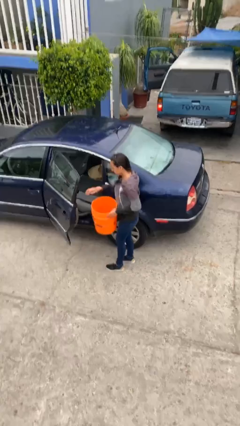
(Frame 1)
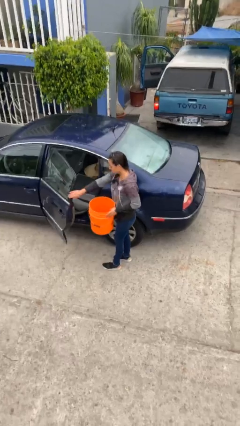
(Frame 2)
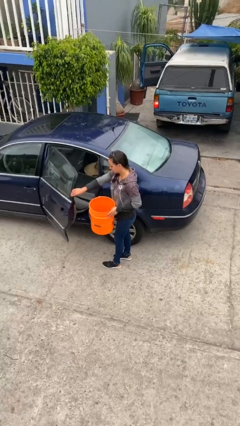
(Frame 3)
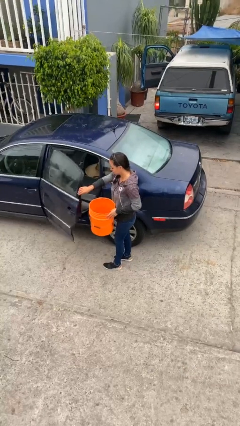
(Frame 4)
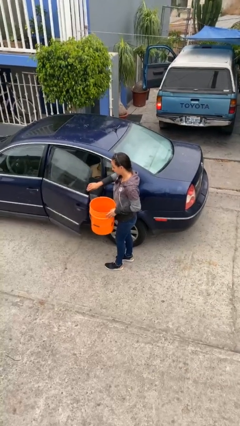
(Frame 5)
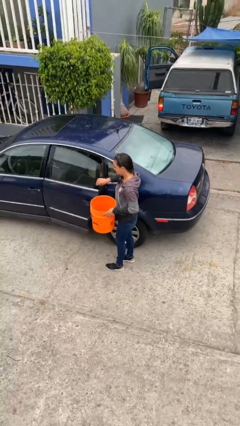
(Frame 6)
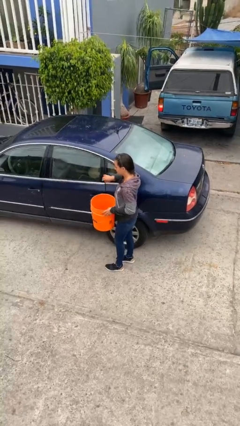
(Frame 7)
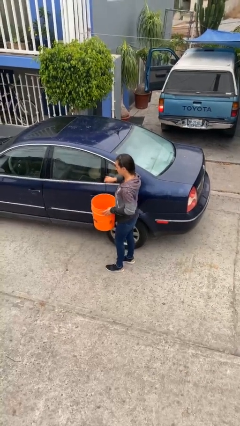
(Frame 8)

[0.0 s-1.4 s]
person closes car door

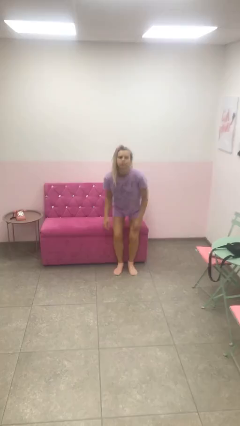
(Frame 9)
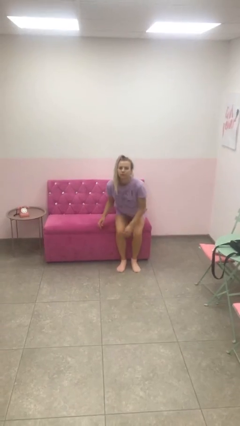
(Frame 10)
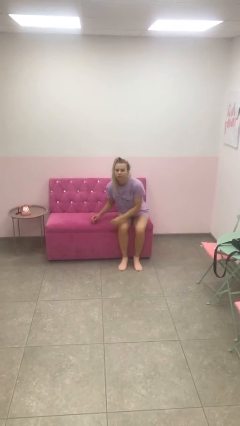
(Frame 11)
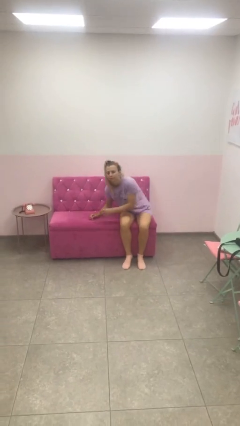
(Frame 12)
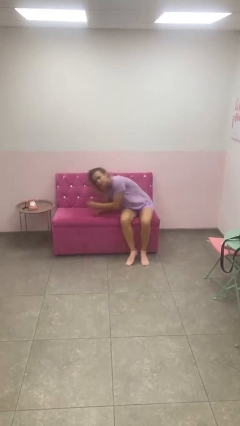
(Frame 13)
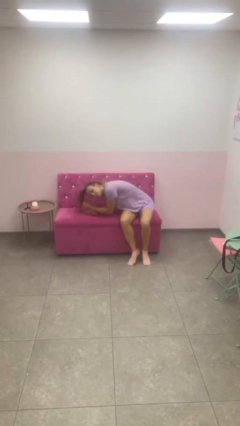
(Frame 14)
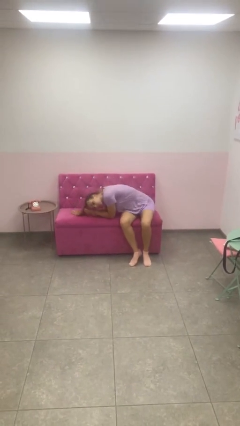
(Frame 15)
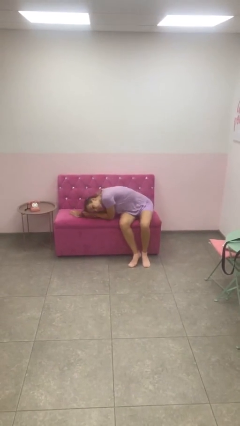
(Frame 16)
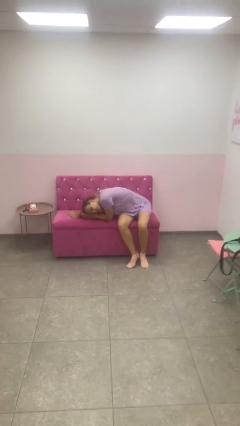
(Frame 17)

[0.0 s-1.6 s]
person lies down on couch

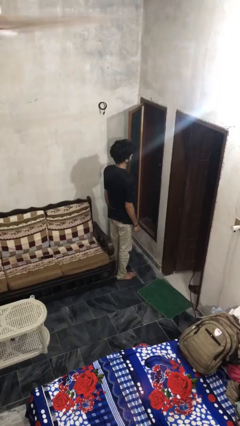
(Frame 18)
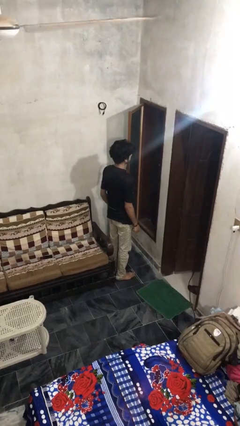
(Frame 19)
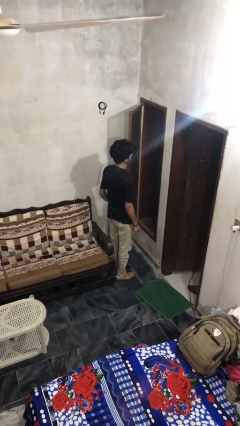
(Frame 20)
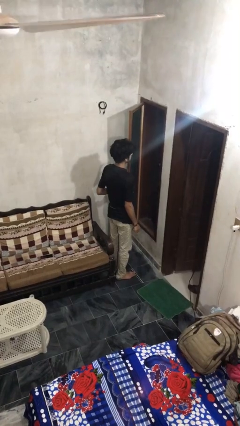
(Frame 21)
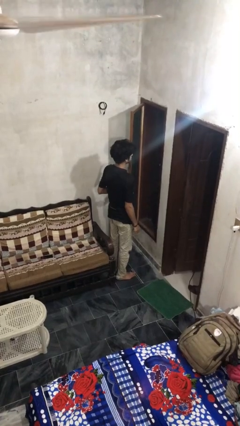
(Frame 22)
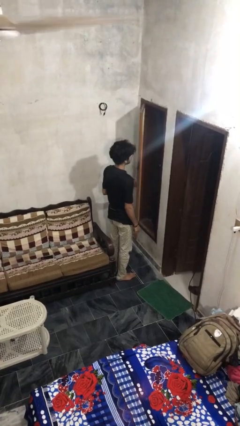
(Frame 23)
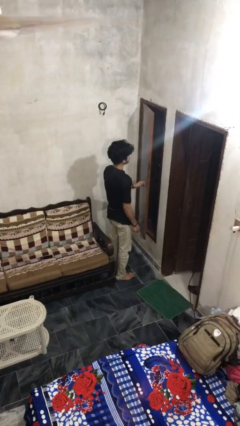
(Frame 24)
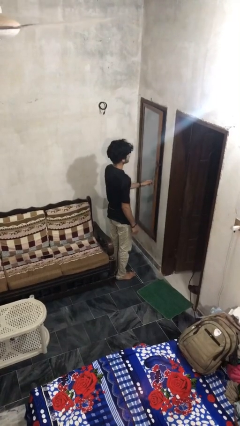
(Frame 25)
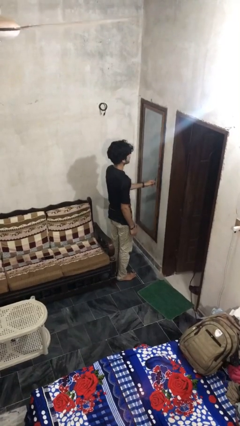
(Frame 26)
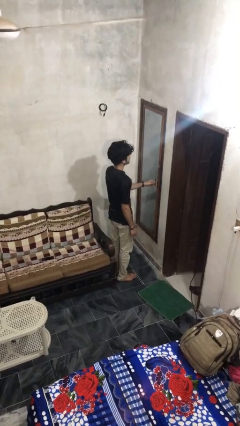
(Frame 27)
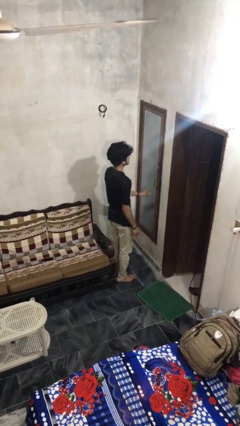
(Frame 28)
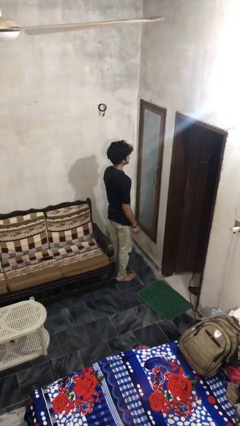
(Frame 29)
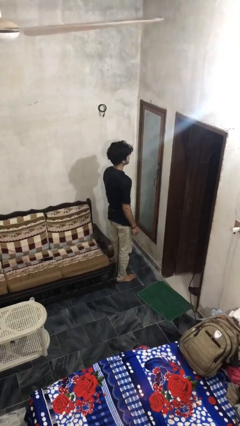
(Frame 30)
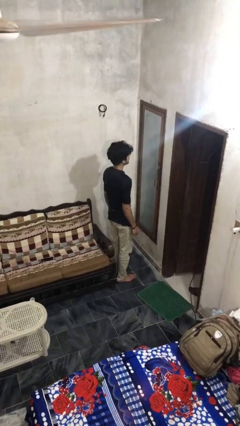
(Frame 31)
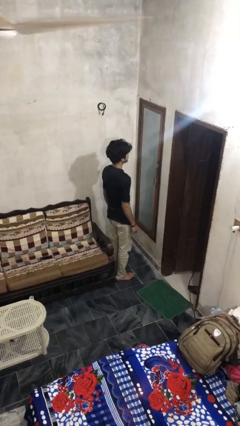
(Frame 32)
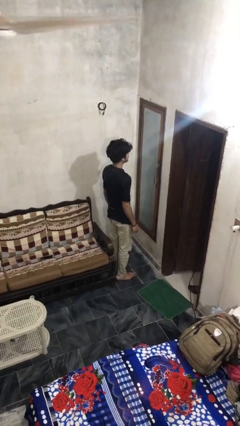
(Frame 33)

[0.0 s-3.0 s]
person closes home window

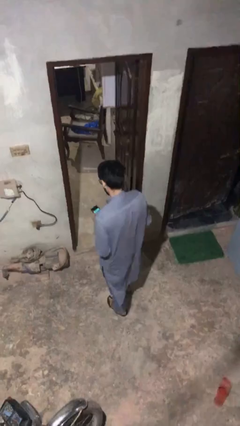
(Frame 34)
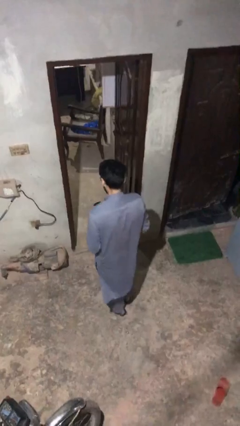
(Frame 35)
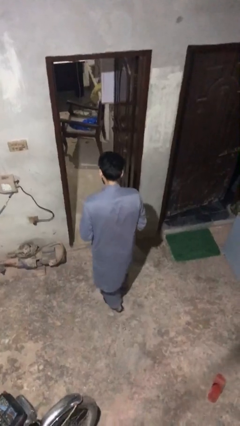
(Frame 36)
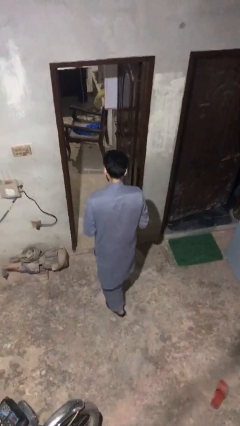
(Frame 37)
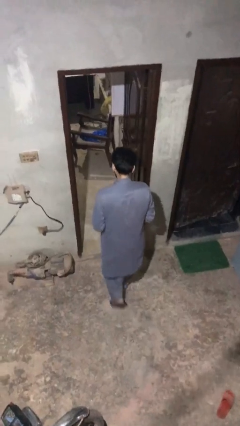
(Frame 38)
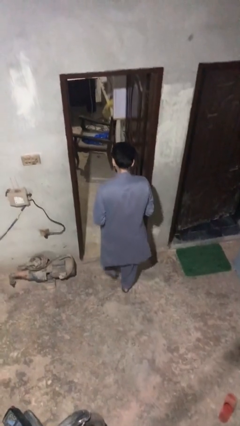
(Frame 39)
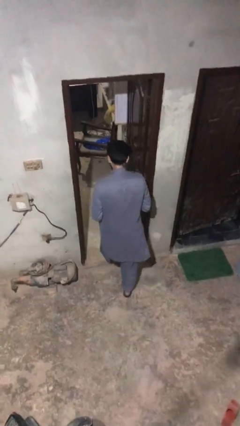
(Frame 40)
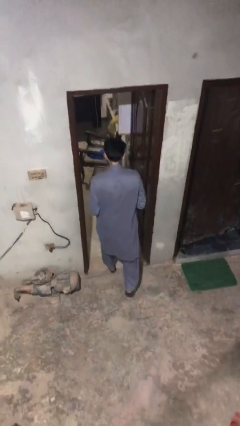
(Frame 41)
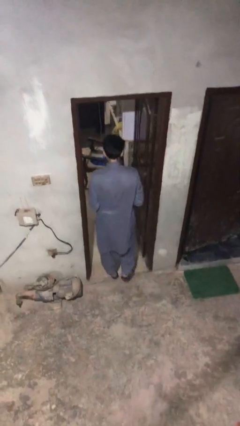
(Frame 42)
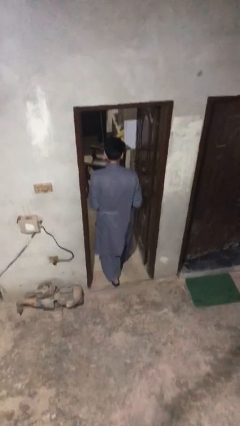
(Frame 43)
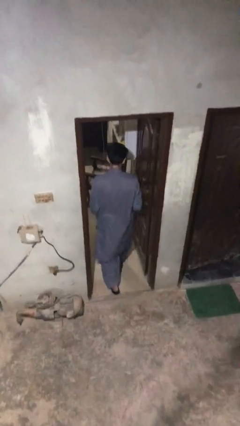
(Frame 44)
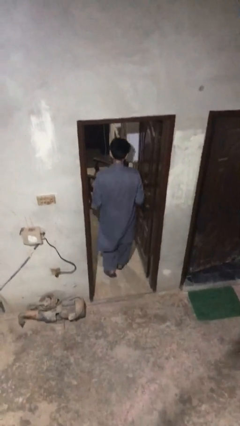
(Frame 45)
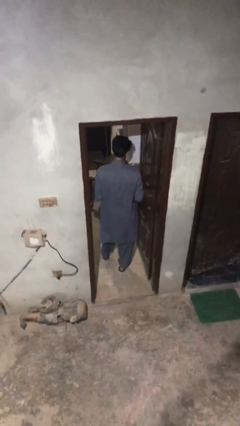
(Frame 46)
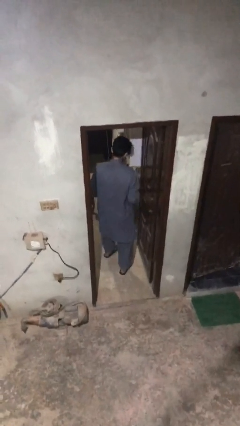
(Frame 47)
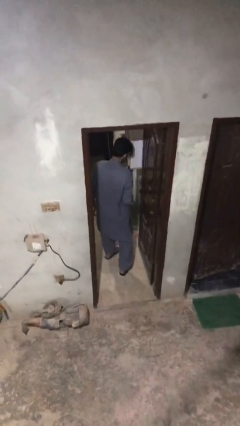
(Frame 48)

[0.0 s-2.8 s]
person enters scene through structure

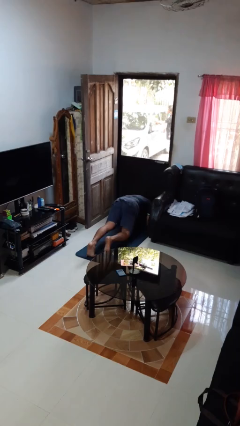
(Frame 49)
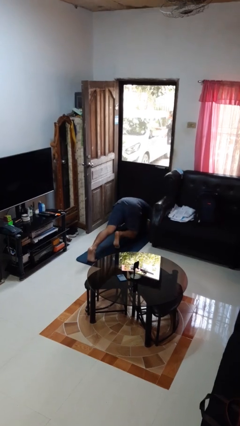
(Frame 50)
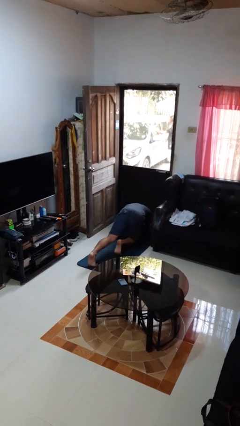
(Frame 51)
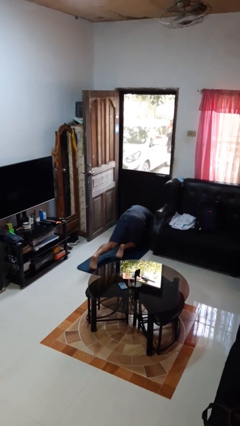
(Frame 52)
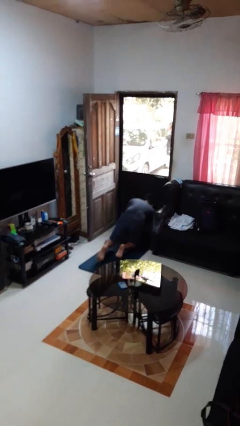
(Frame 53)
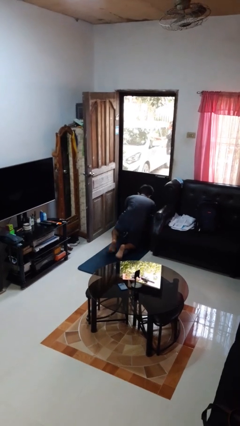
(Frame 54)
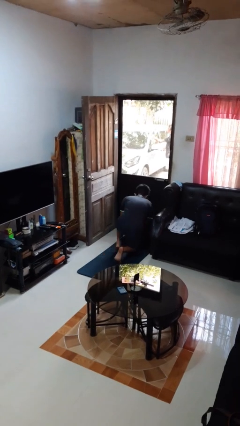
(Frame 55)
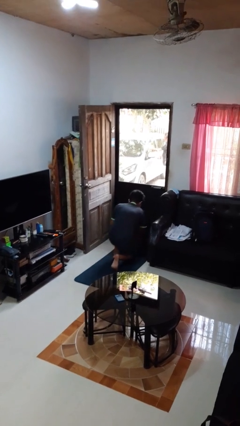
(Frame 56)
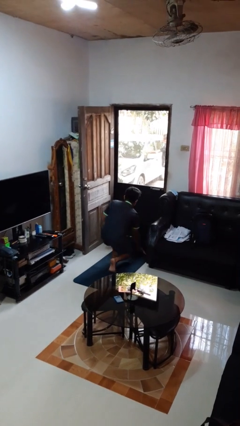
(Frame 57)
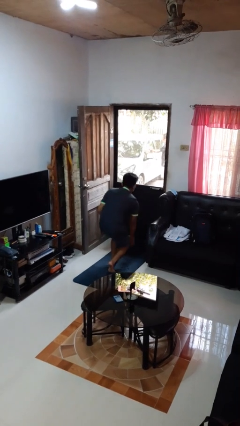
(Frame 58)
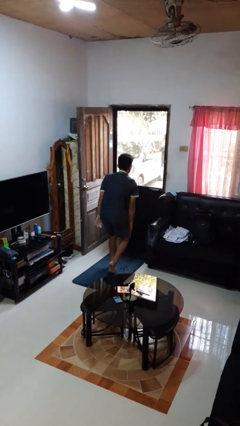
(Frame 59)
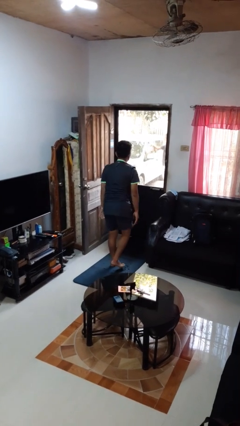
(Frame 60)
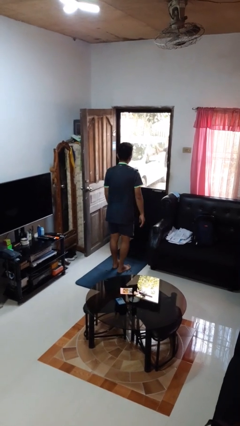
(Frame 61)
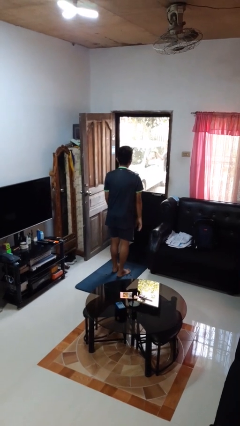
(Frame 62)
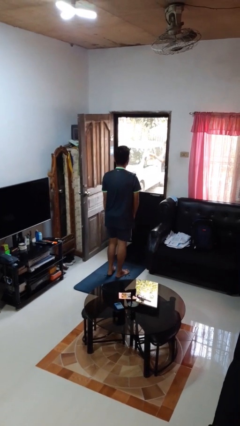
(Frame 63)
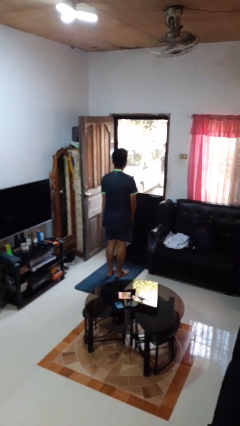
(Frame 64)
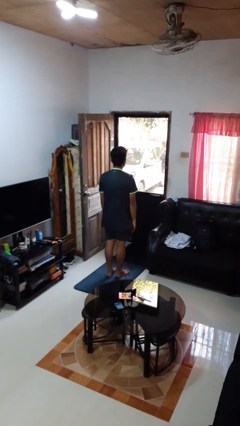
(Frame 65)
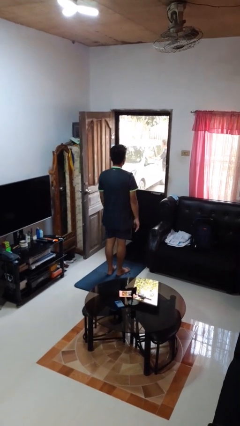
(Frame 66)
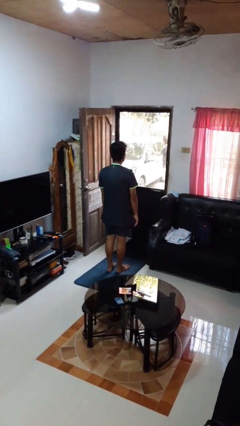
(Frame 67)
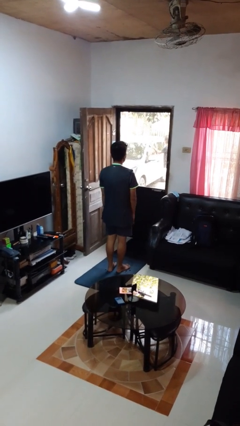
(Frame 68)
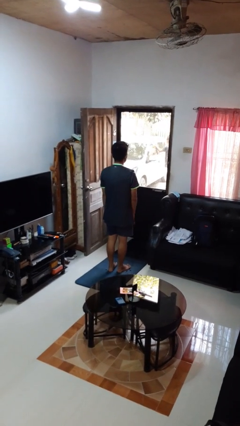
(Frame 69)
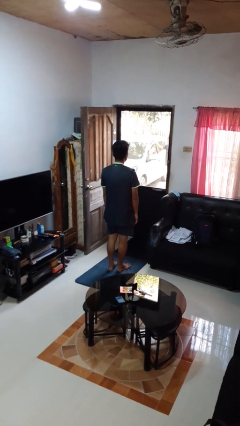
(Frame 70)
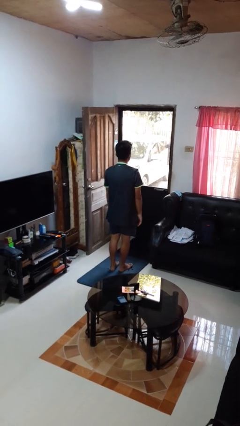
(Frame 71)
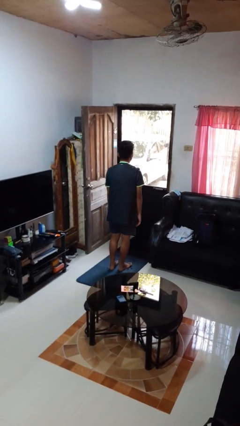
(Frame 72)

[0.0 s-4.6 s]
person stands up from floor

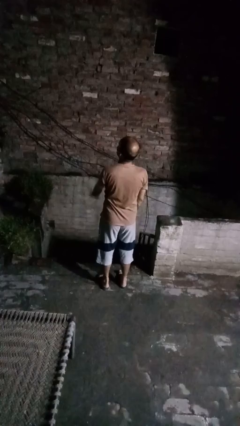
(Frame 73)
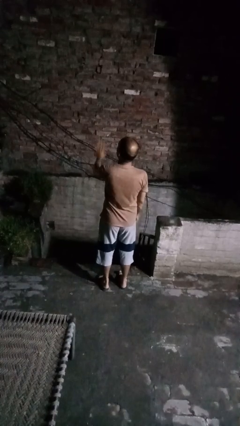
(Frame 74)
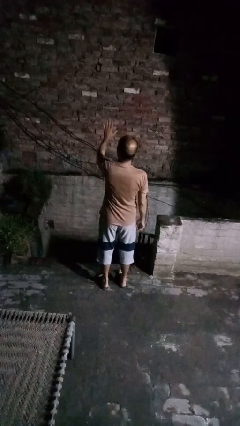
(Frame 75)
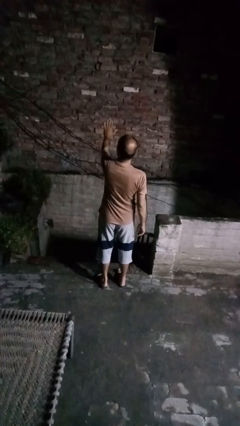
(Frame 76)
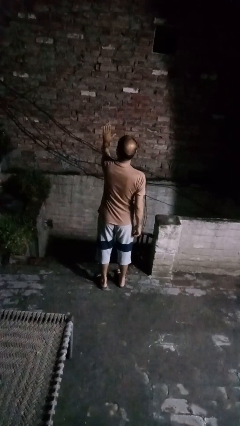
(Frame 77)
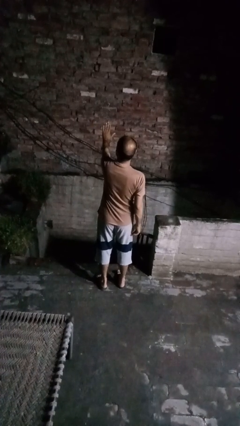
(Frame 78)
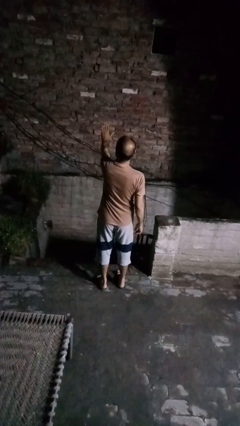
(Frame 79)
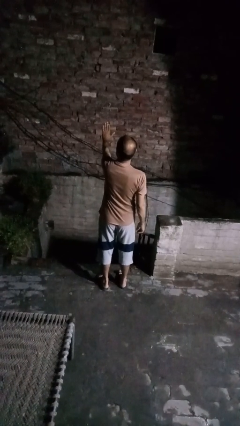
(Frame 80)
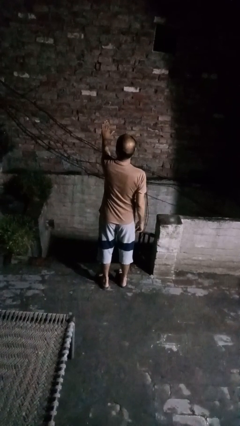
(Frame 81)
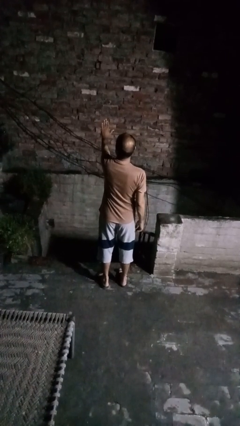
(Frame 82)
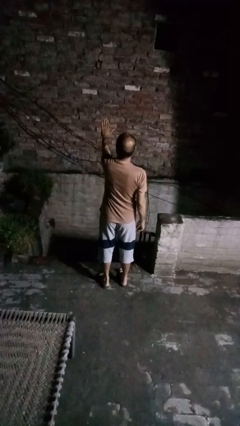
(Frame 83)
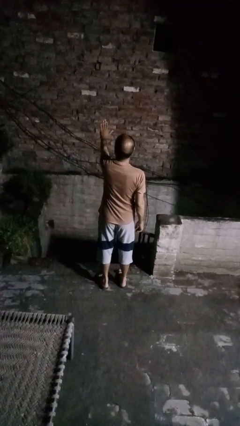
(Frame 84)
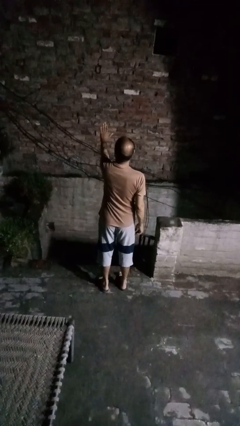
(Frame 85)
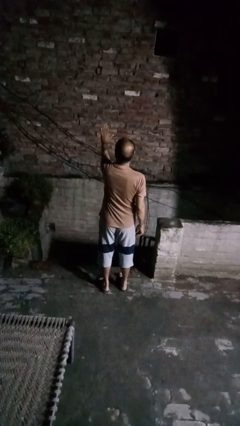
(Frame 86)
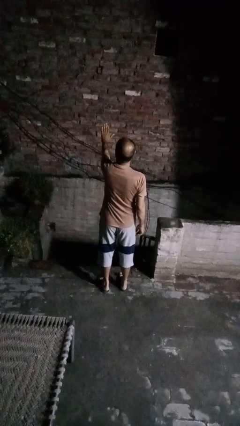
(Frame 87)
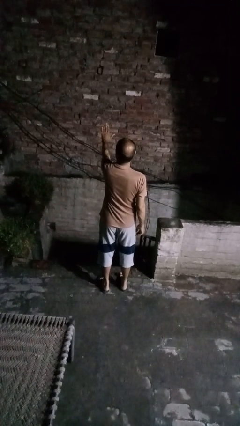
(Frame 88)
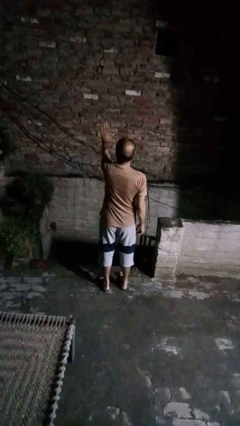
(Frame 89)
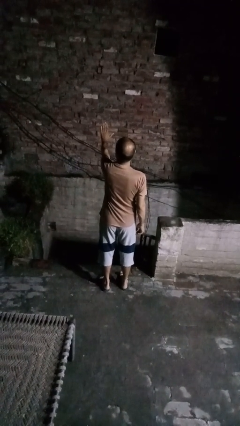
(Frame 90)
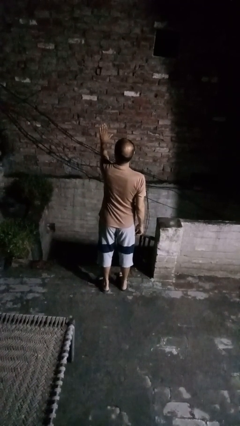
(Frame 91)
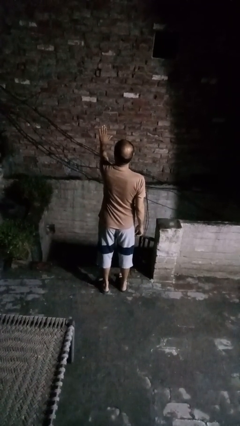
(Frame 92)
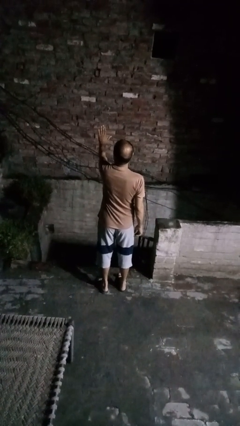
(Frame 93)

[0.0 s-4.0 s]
person gestures stop
